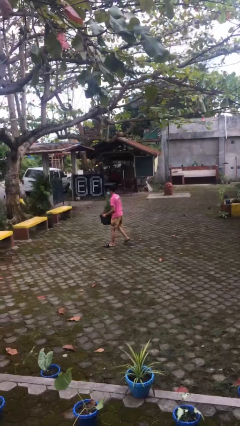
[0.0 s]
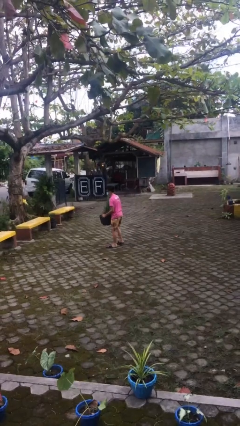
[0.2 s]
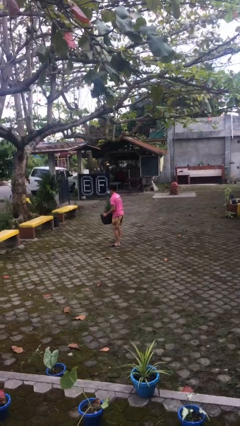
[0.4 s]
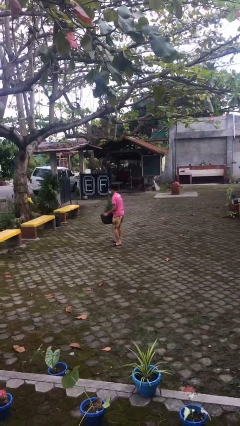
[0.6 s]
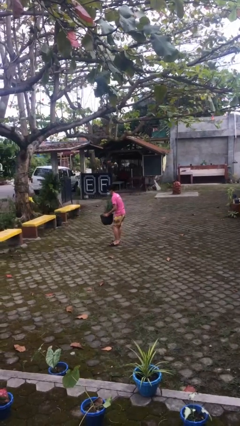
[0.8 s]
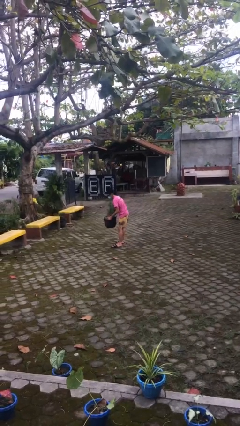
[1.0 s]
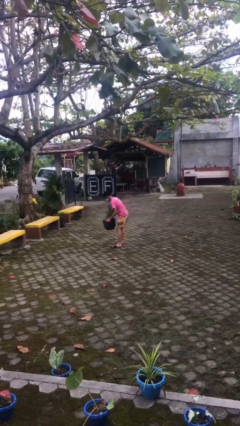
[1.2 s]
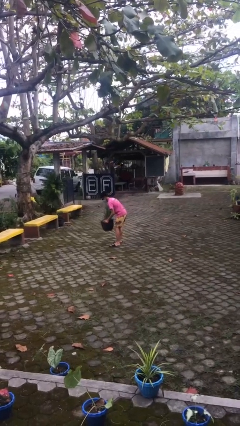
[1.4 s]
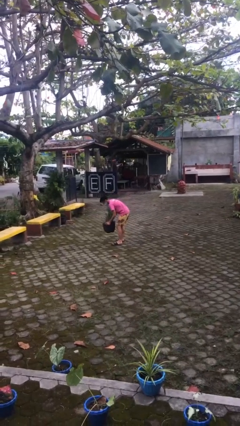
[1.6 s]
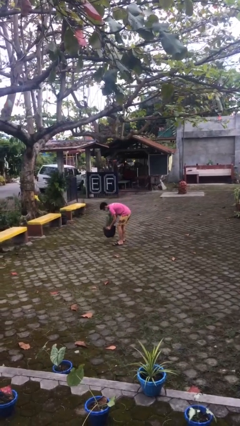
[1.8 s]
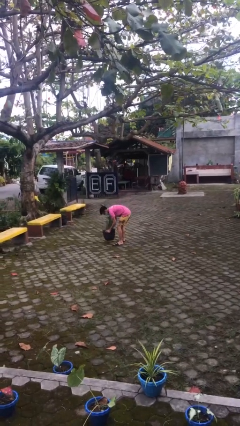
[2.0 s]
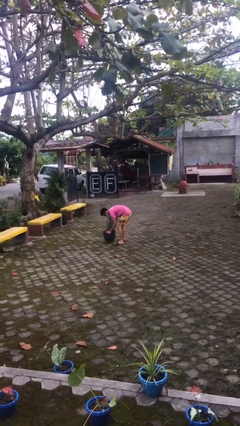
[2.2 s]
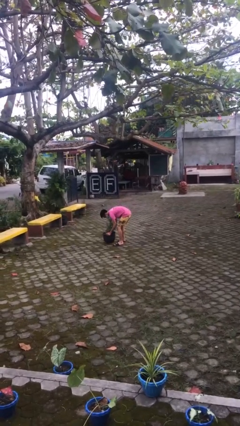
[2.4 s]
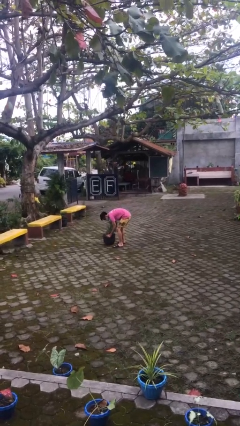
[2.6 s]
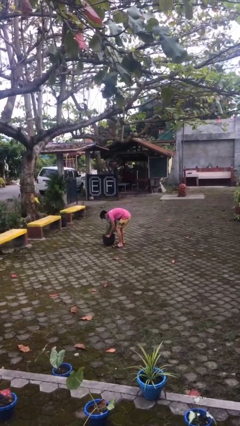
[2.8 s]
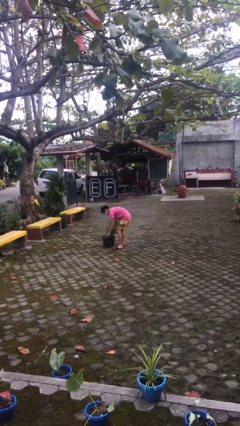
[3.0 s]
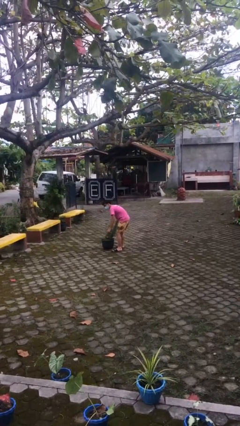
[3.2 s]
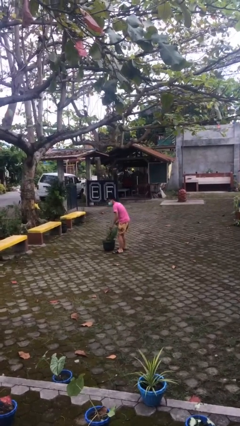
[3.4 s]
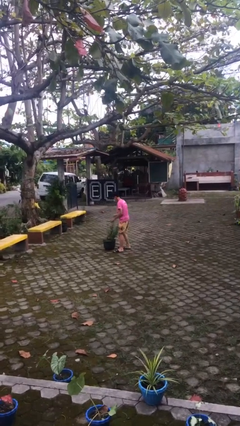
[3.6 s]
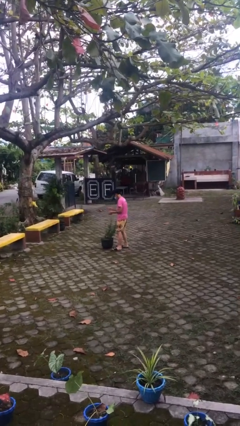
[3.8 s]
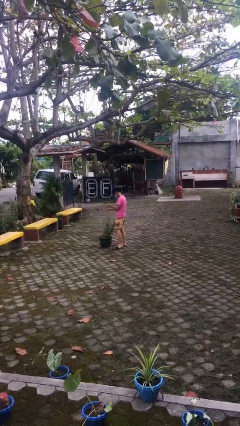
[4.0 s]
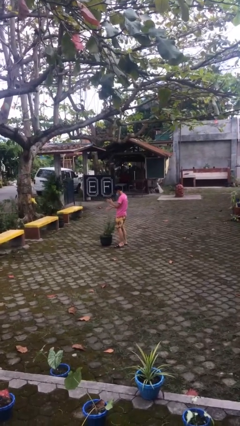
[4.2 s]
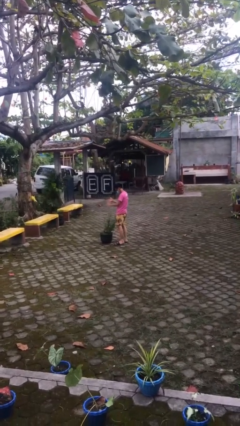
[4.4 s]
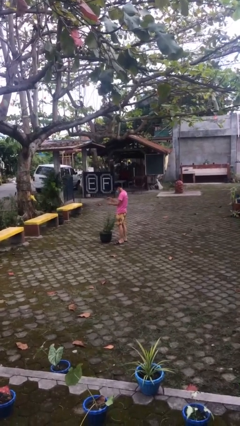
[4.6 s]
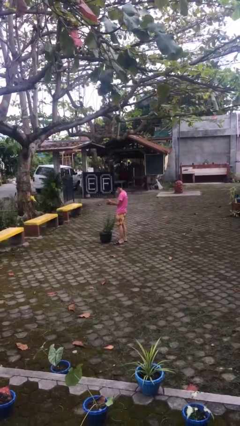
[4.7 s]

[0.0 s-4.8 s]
person puts down object on floor

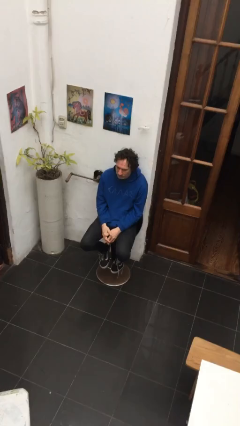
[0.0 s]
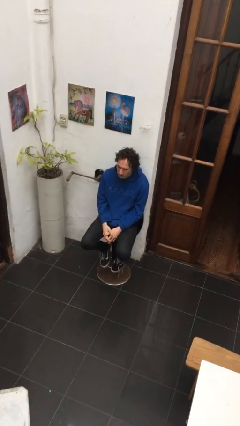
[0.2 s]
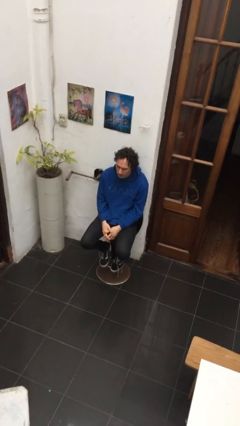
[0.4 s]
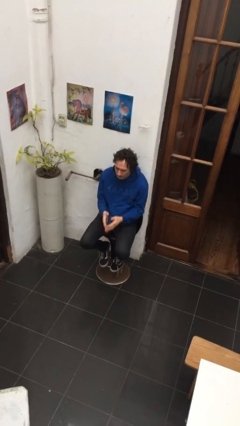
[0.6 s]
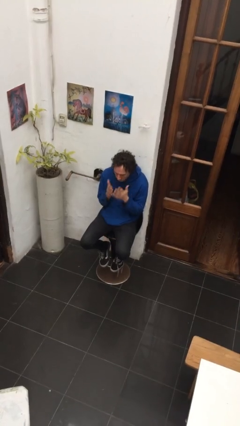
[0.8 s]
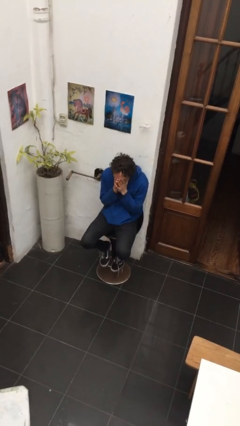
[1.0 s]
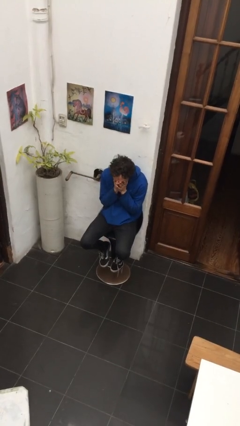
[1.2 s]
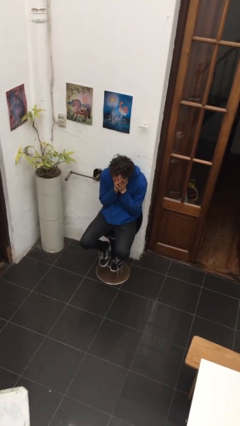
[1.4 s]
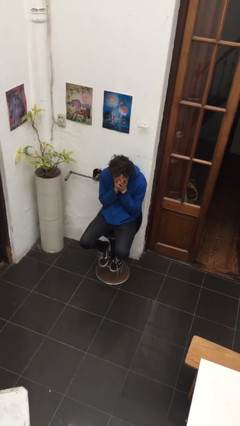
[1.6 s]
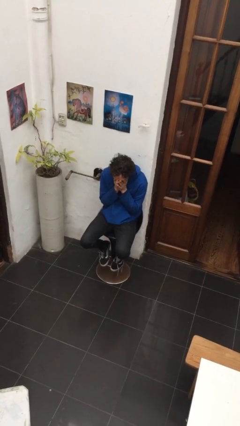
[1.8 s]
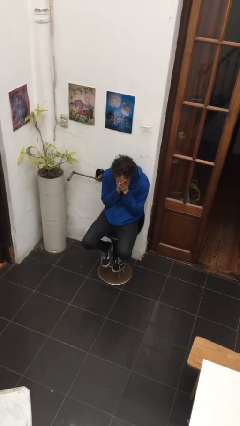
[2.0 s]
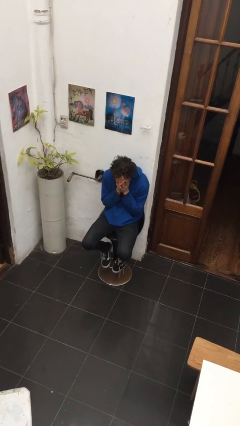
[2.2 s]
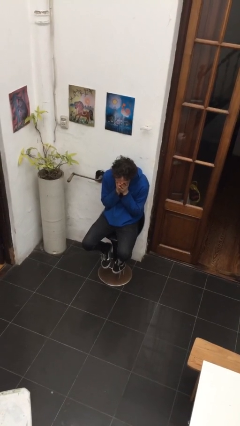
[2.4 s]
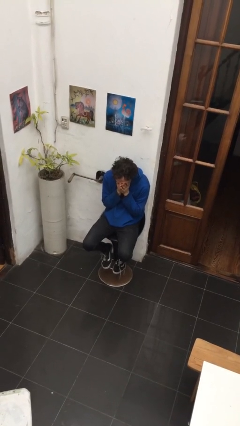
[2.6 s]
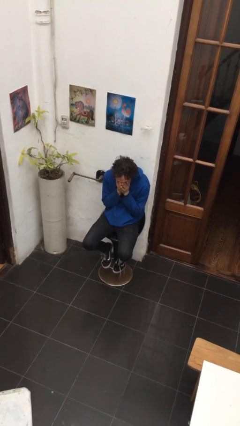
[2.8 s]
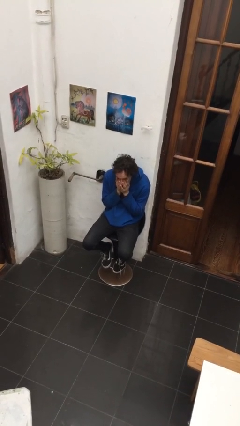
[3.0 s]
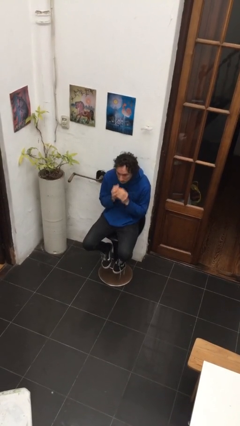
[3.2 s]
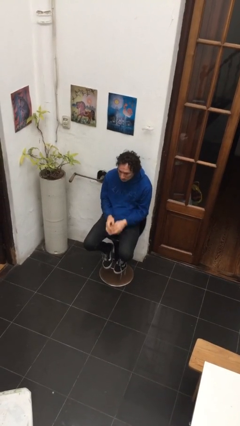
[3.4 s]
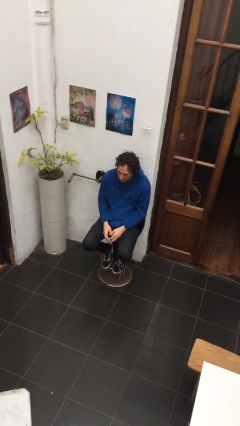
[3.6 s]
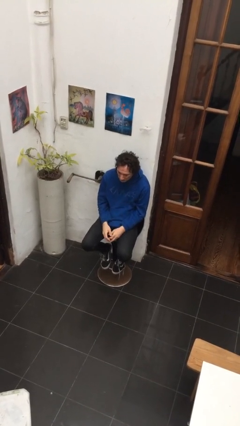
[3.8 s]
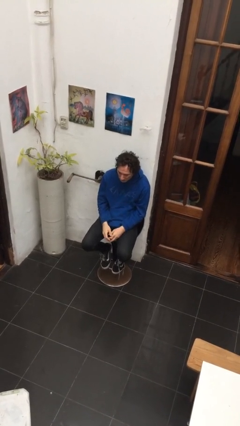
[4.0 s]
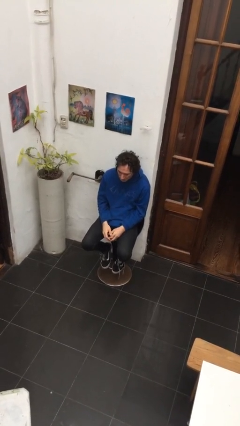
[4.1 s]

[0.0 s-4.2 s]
person covers face with hands

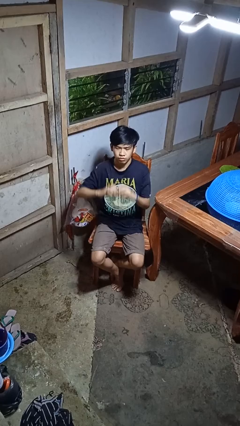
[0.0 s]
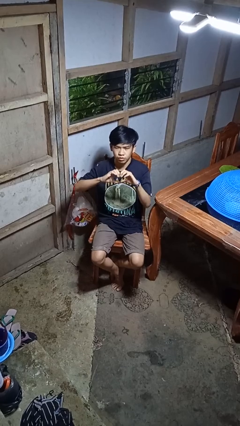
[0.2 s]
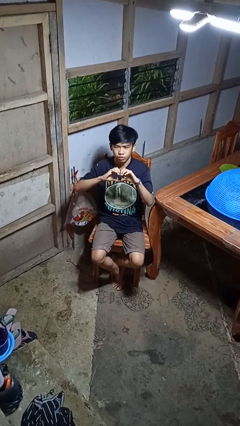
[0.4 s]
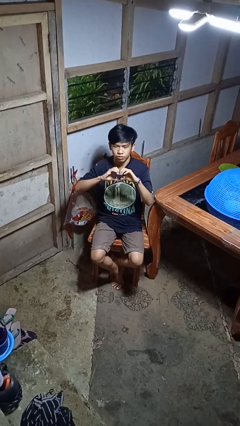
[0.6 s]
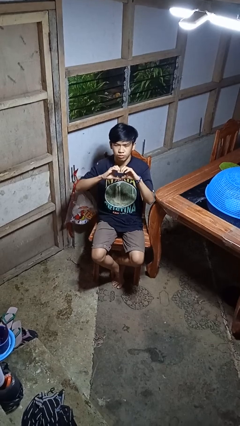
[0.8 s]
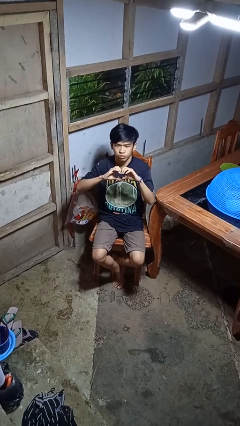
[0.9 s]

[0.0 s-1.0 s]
person gestures heart

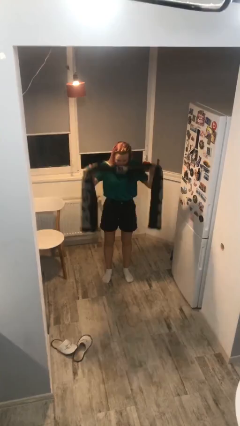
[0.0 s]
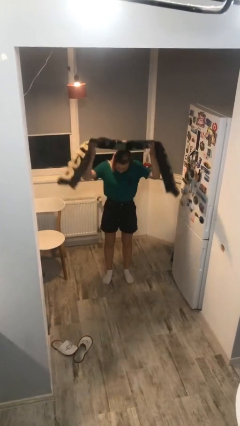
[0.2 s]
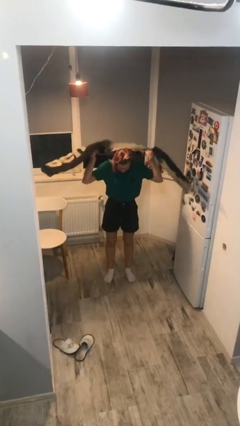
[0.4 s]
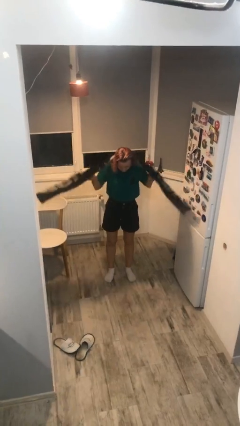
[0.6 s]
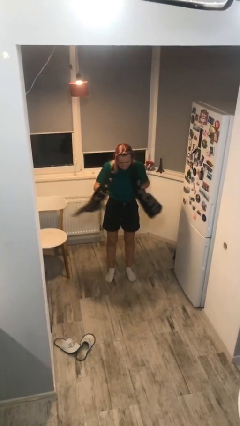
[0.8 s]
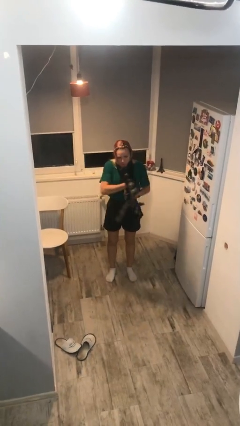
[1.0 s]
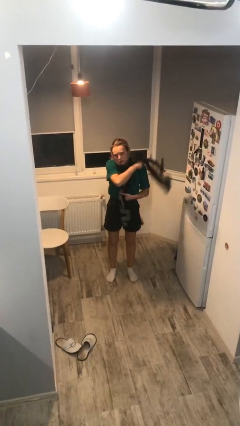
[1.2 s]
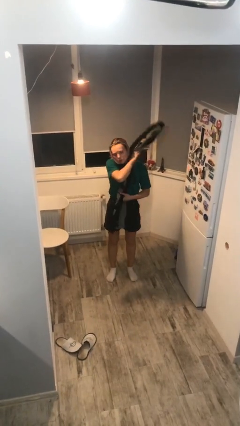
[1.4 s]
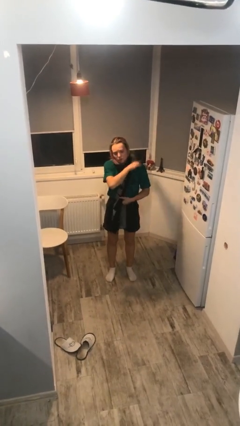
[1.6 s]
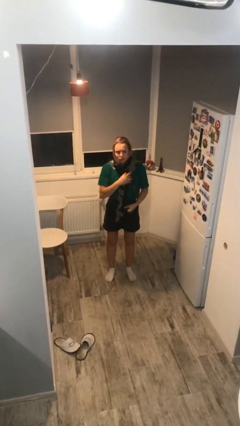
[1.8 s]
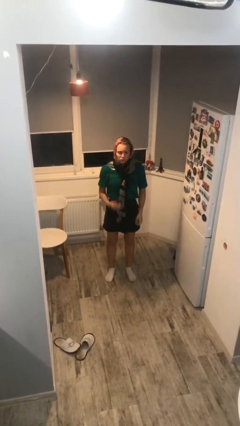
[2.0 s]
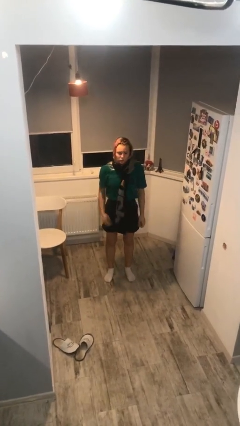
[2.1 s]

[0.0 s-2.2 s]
person puts on scarf

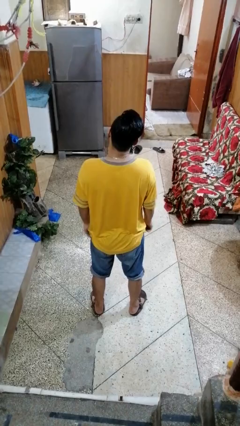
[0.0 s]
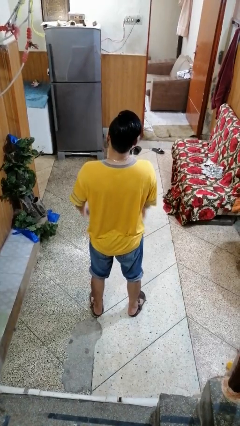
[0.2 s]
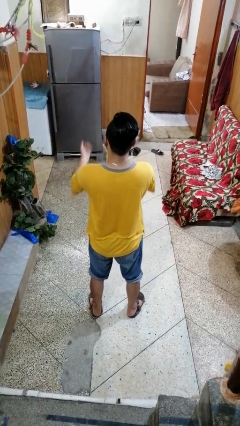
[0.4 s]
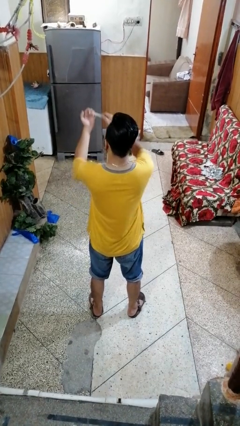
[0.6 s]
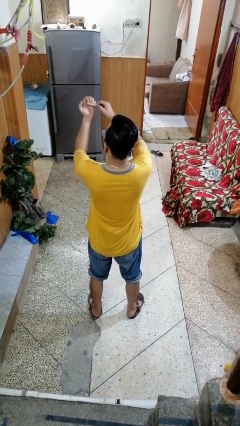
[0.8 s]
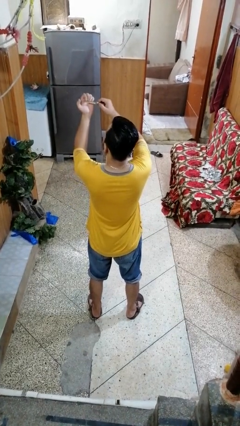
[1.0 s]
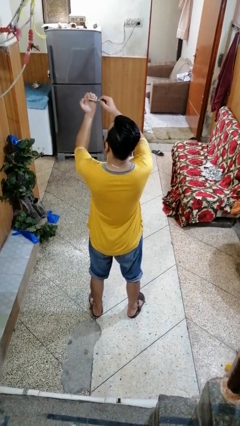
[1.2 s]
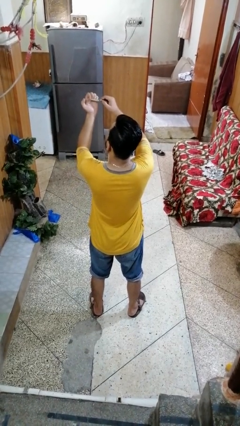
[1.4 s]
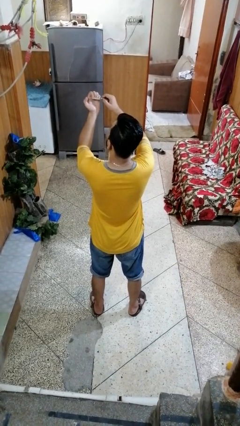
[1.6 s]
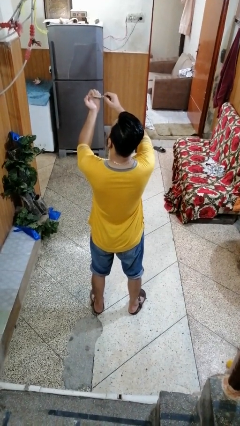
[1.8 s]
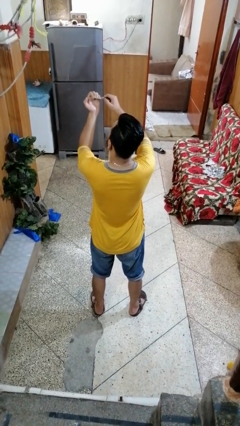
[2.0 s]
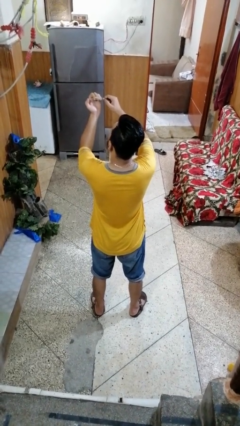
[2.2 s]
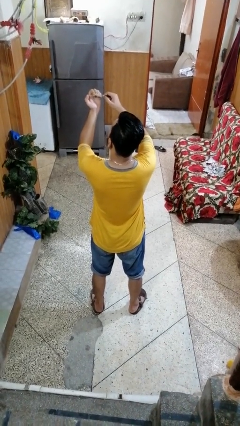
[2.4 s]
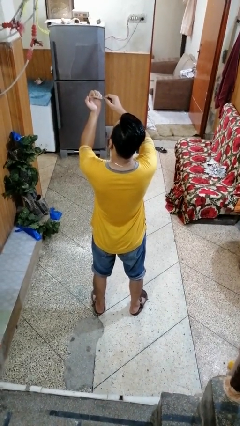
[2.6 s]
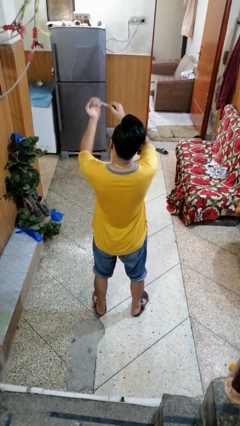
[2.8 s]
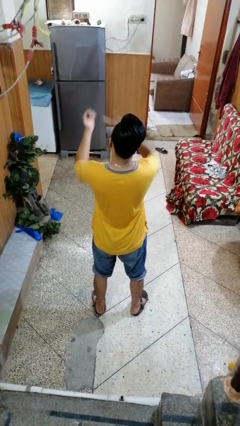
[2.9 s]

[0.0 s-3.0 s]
person files fingernails

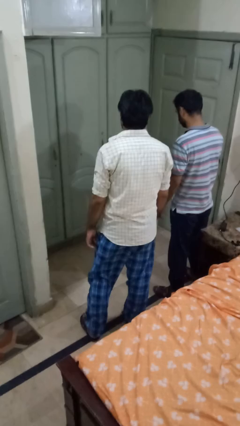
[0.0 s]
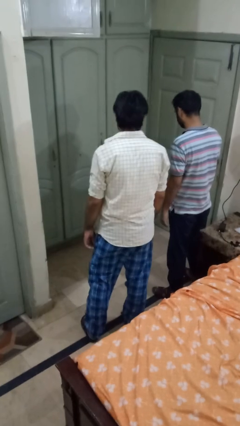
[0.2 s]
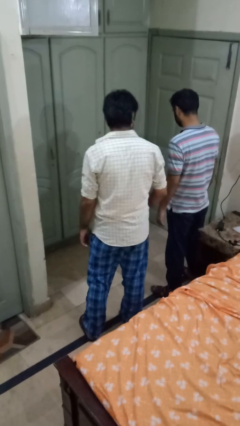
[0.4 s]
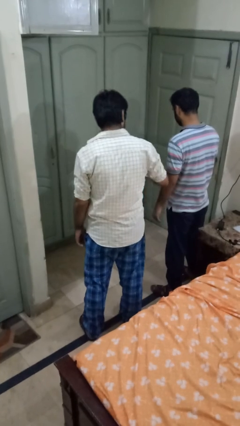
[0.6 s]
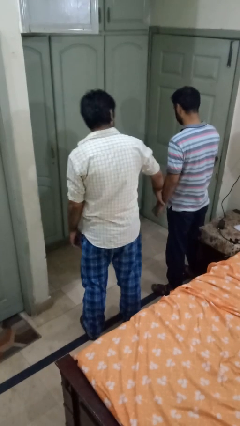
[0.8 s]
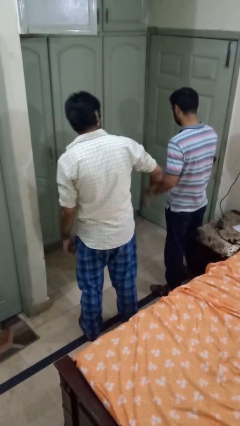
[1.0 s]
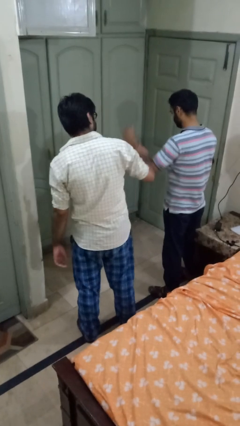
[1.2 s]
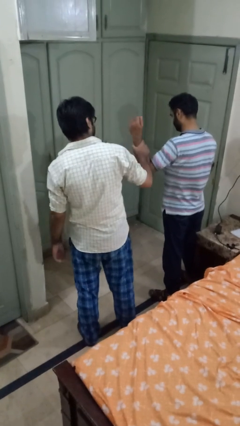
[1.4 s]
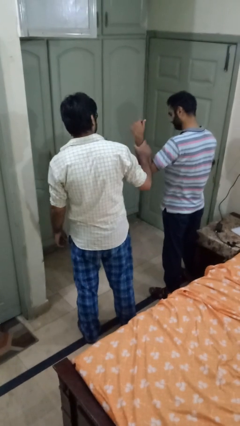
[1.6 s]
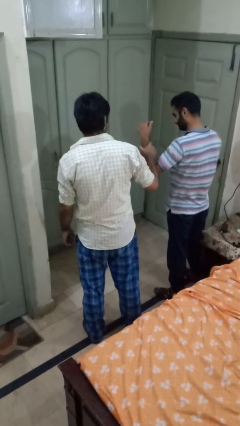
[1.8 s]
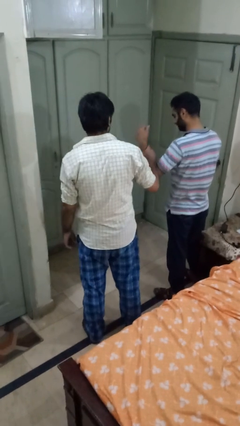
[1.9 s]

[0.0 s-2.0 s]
person grabs person by forearm

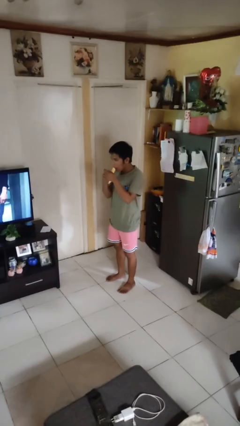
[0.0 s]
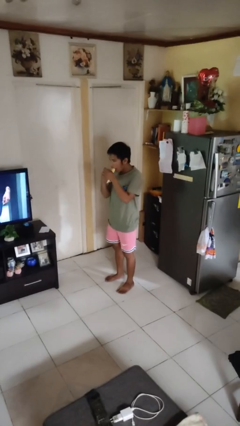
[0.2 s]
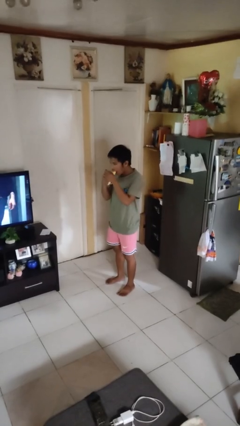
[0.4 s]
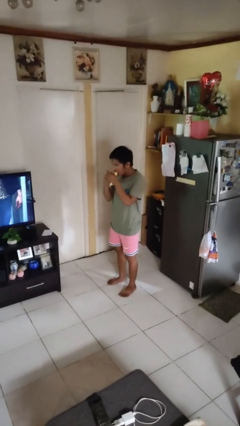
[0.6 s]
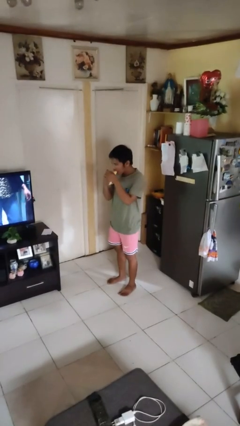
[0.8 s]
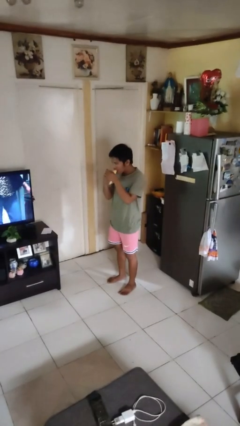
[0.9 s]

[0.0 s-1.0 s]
person eats banana
